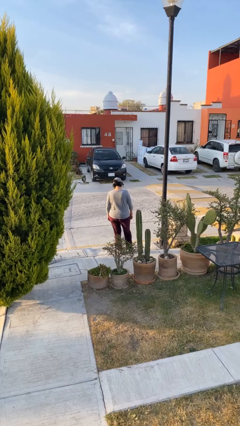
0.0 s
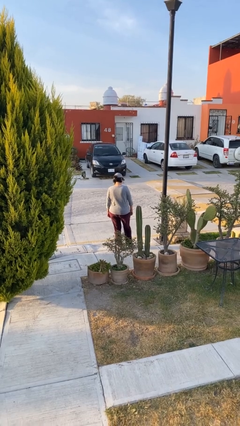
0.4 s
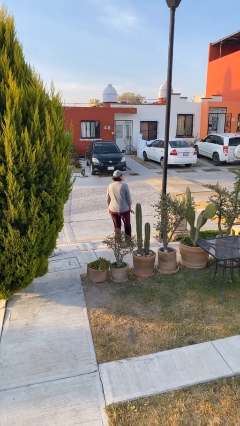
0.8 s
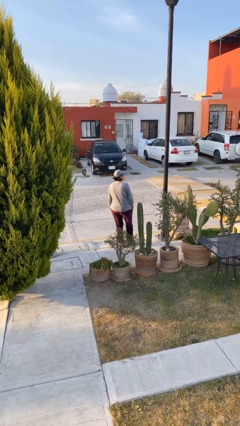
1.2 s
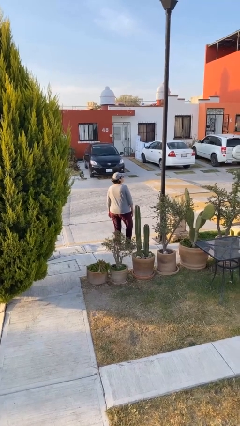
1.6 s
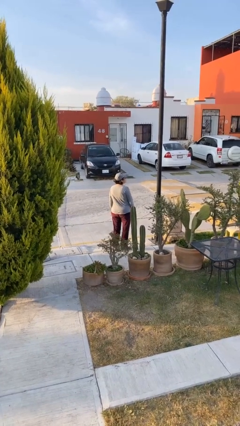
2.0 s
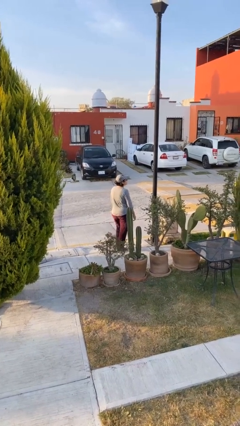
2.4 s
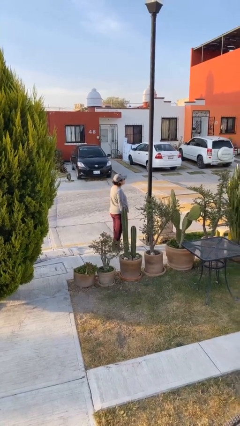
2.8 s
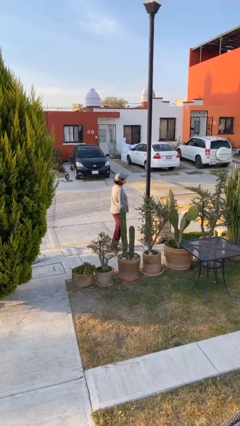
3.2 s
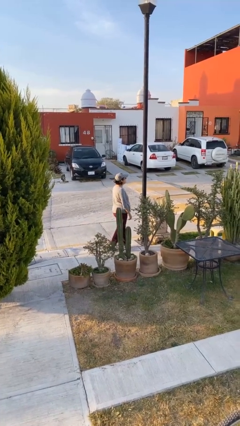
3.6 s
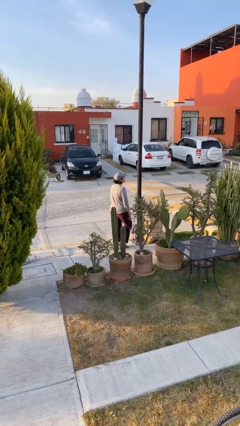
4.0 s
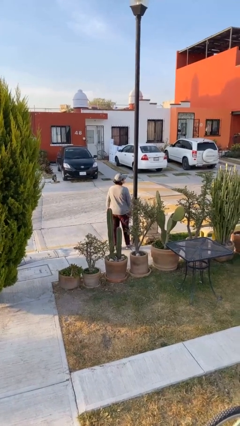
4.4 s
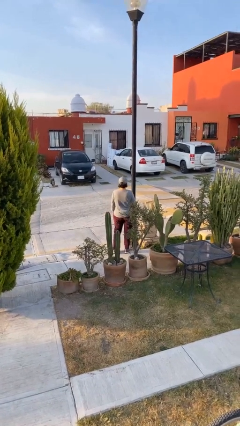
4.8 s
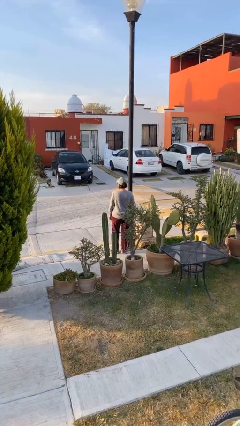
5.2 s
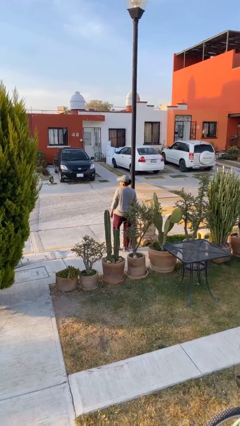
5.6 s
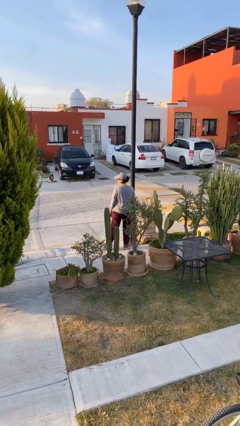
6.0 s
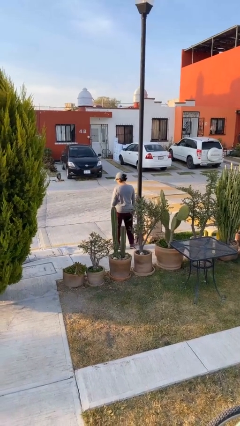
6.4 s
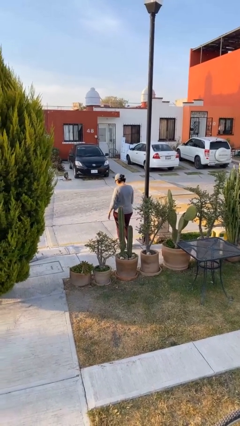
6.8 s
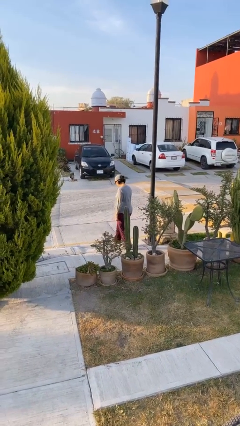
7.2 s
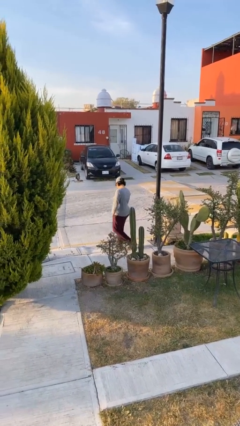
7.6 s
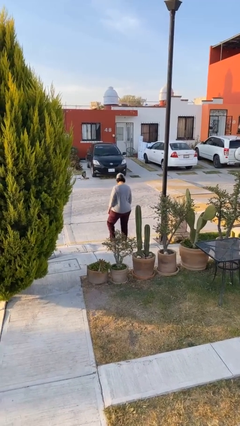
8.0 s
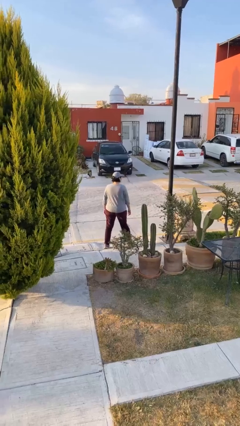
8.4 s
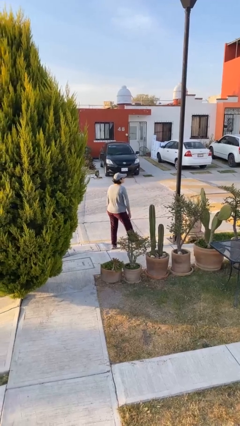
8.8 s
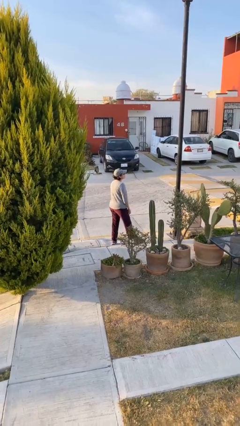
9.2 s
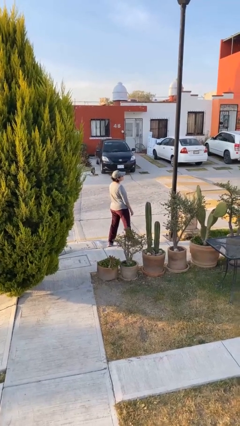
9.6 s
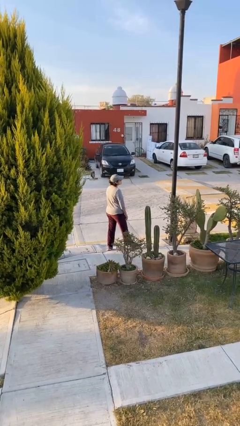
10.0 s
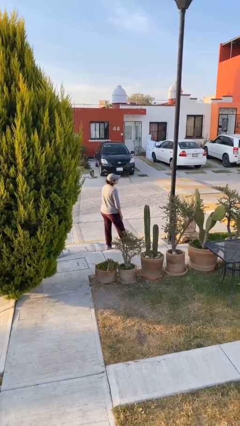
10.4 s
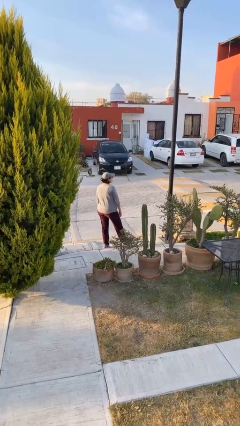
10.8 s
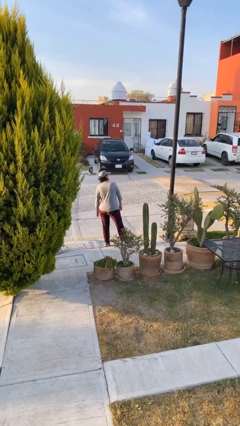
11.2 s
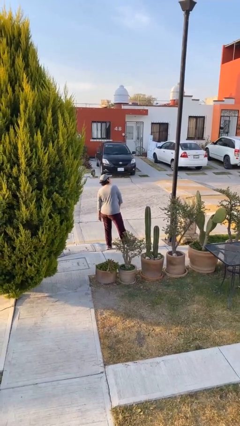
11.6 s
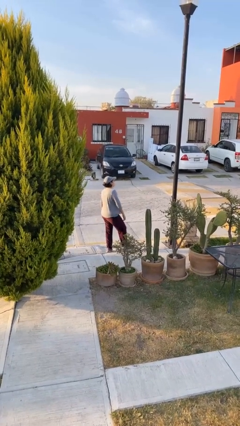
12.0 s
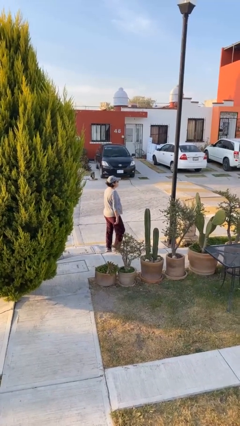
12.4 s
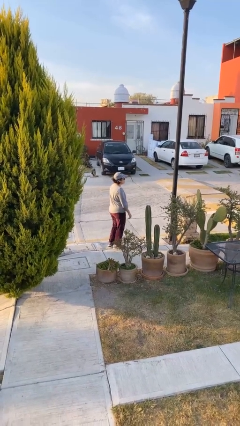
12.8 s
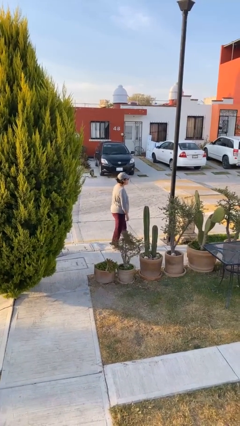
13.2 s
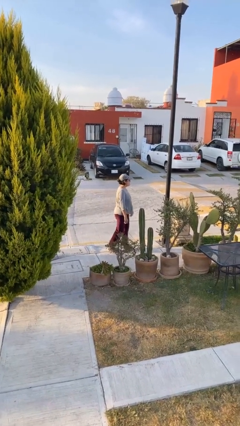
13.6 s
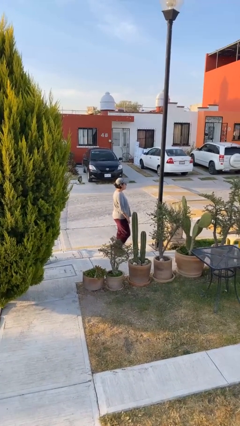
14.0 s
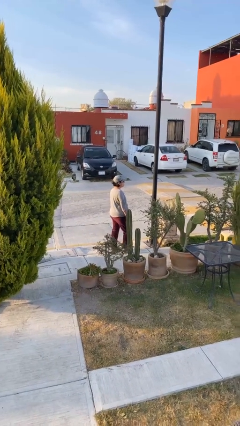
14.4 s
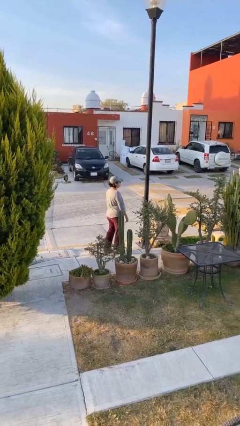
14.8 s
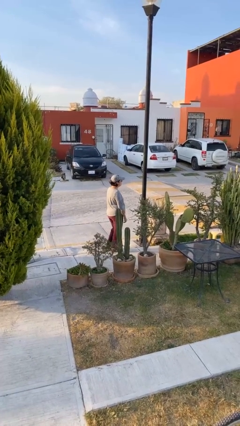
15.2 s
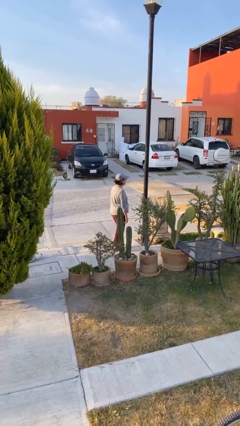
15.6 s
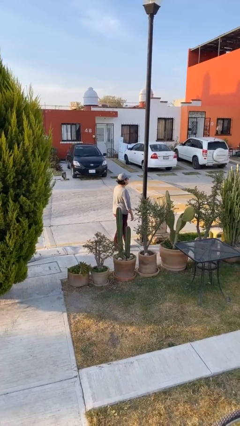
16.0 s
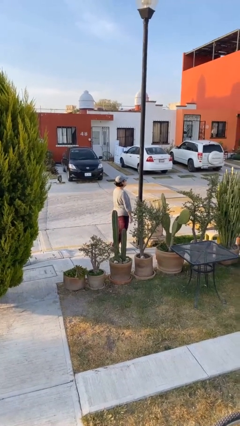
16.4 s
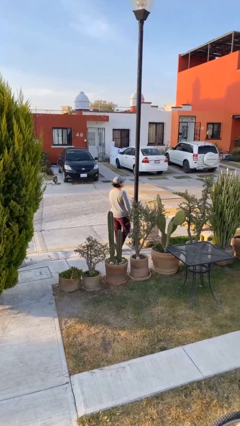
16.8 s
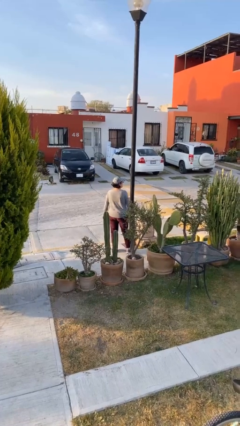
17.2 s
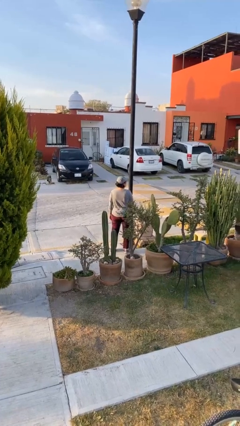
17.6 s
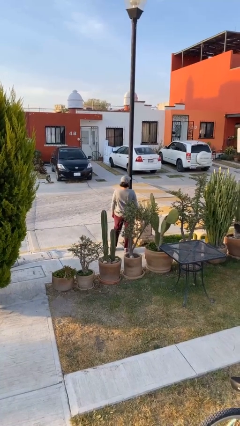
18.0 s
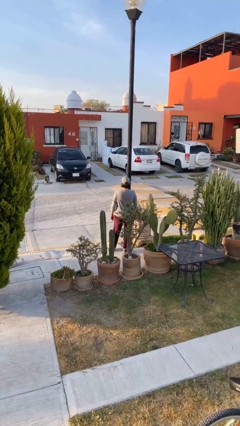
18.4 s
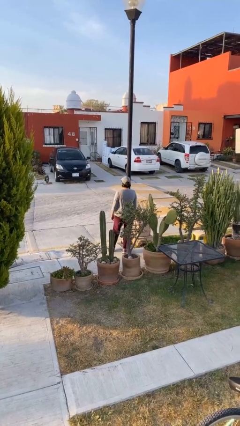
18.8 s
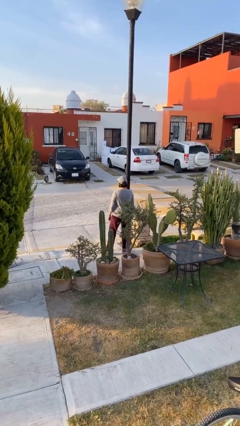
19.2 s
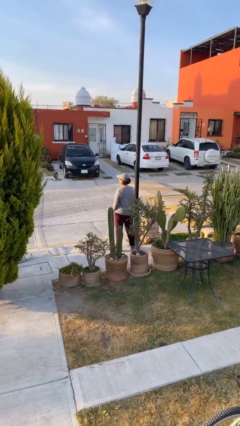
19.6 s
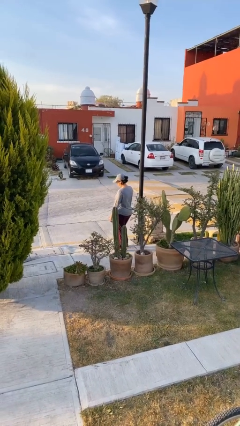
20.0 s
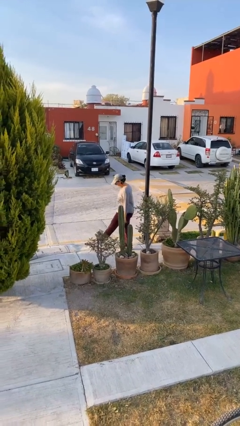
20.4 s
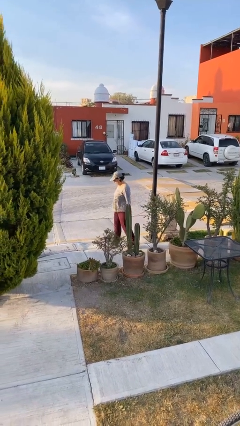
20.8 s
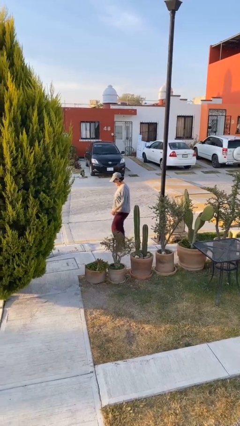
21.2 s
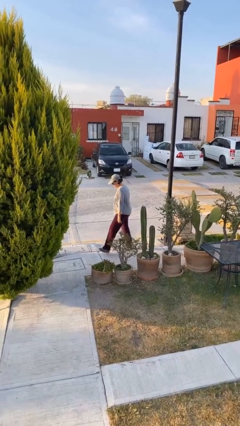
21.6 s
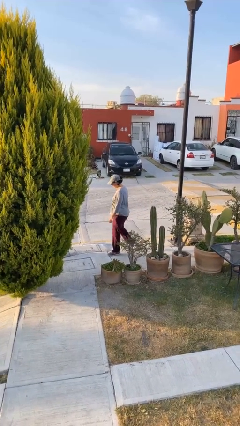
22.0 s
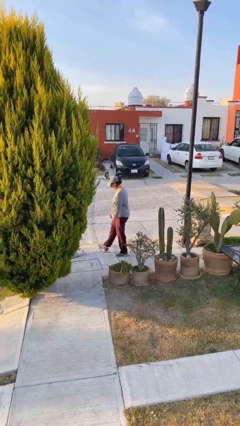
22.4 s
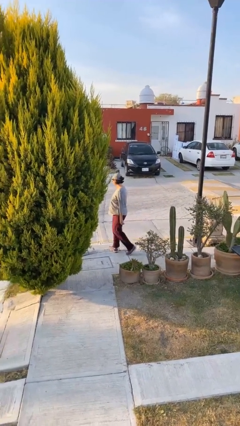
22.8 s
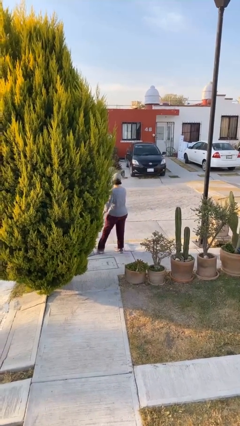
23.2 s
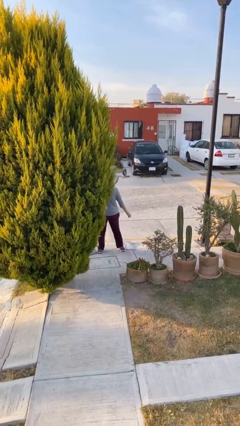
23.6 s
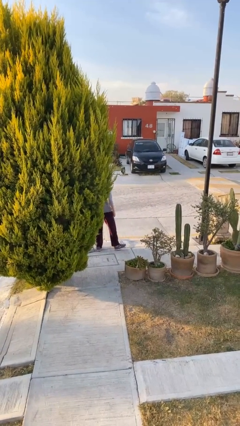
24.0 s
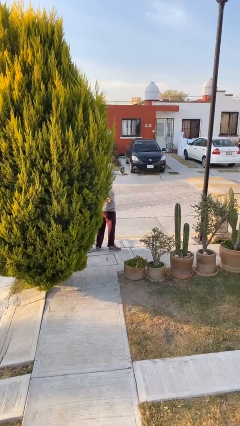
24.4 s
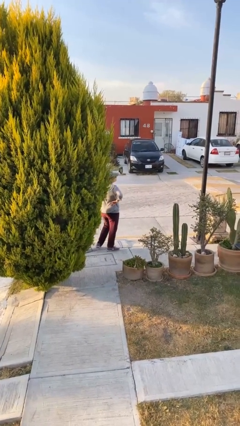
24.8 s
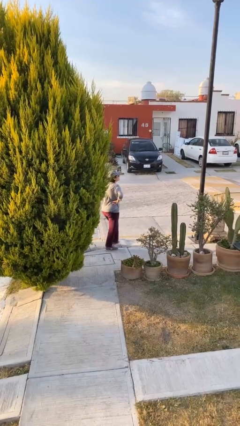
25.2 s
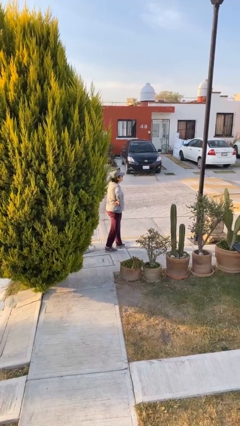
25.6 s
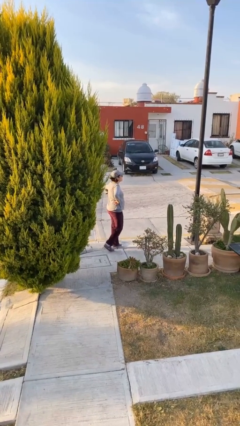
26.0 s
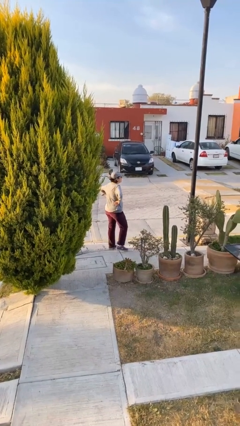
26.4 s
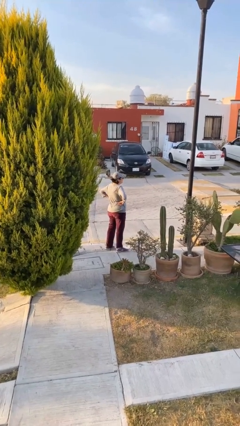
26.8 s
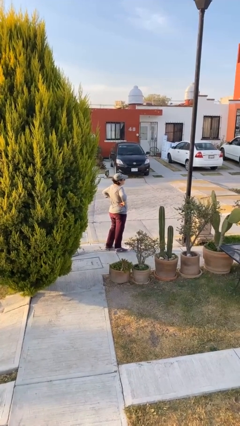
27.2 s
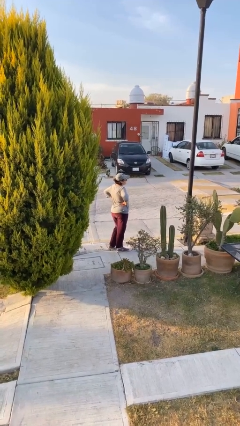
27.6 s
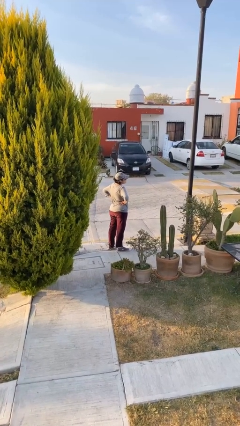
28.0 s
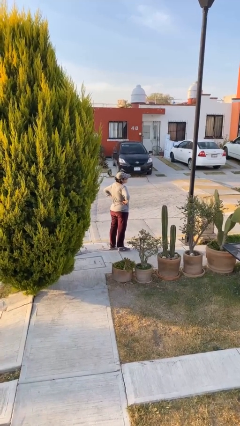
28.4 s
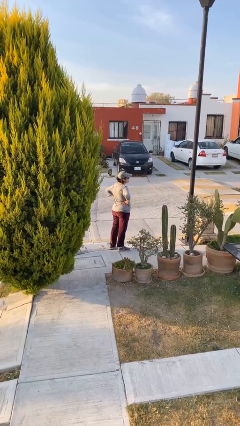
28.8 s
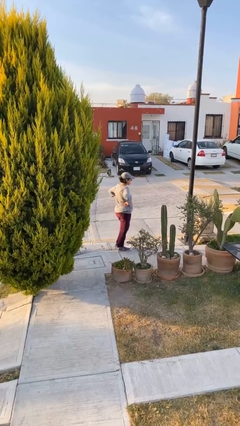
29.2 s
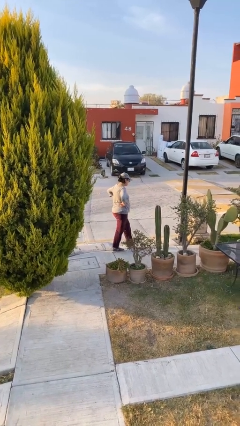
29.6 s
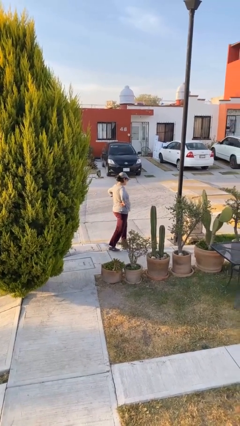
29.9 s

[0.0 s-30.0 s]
person walks

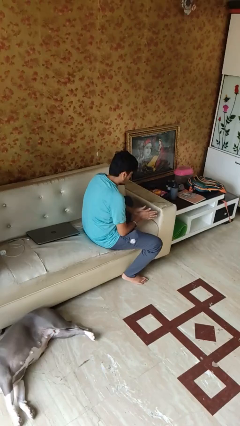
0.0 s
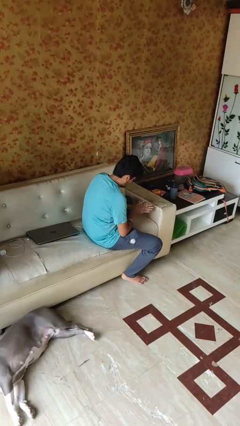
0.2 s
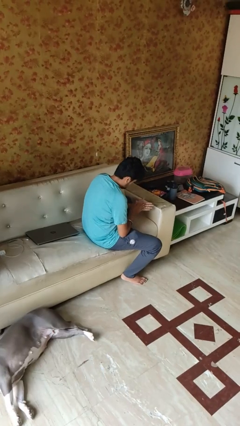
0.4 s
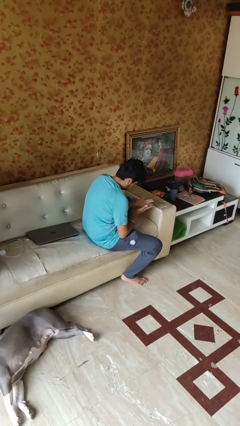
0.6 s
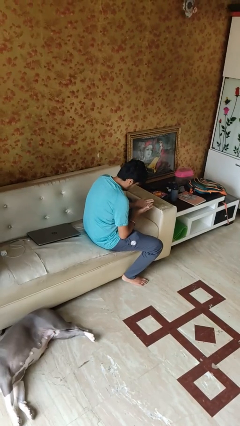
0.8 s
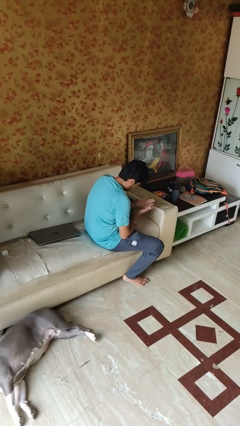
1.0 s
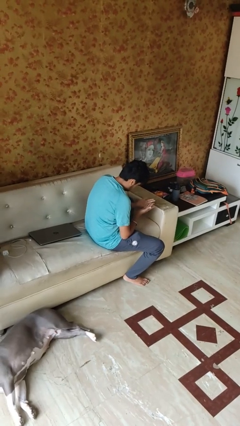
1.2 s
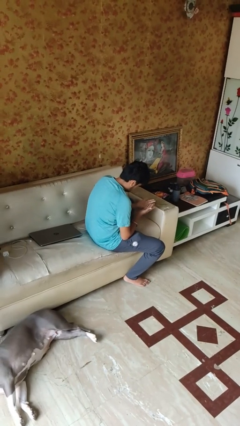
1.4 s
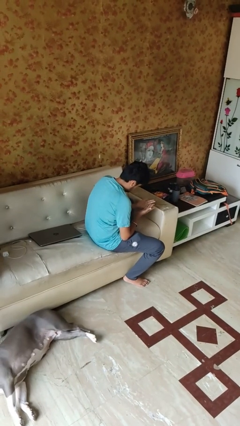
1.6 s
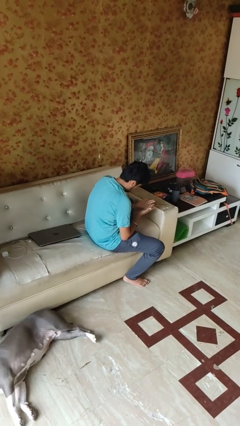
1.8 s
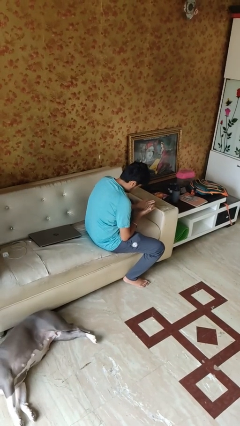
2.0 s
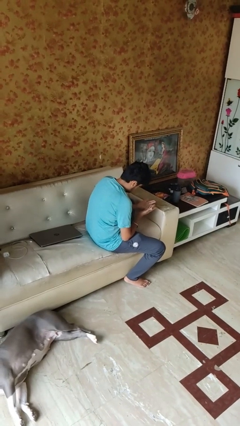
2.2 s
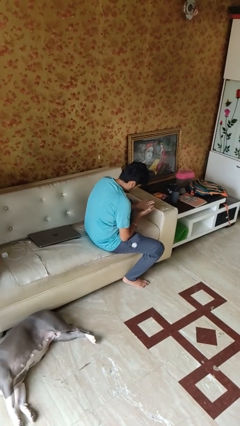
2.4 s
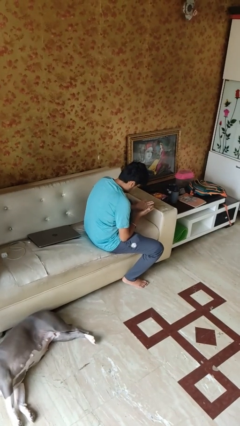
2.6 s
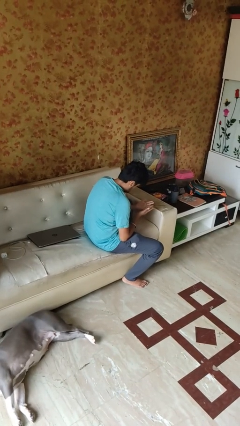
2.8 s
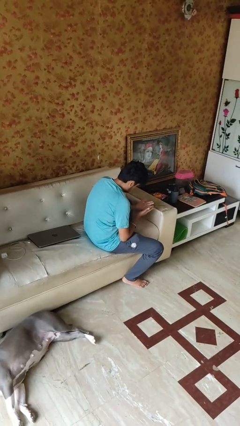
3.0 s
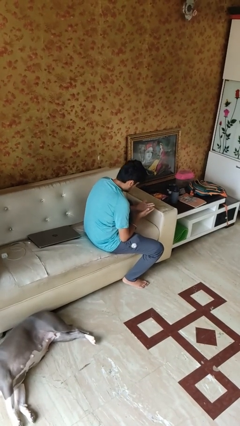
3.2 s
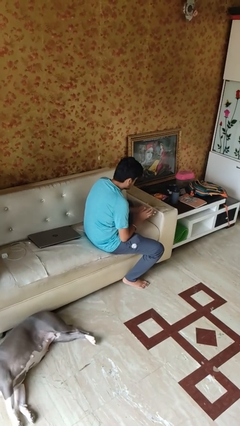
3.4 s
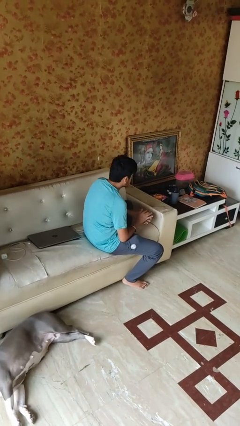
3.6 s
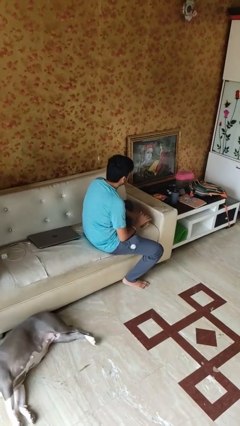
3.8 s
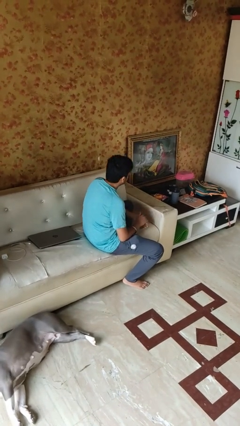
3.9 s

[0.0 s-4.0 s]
person looks at hands in lap
